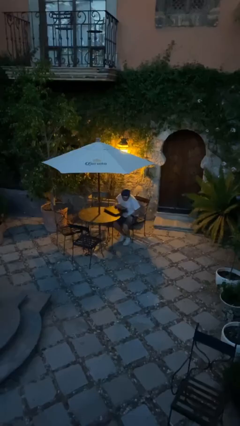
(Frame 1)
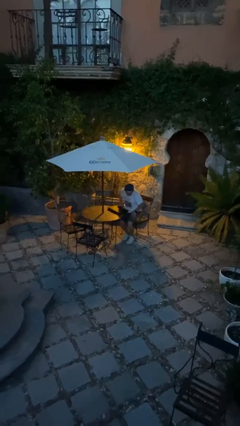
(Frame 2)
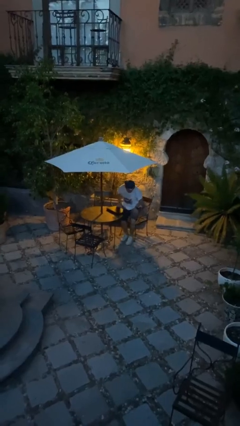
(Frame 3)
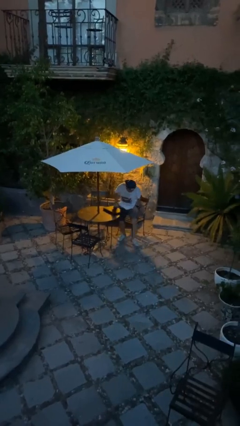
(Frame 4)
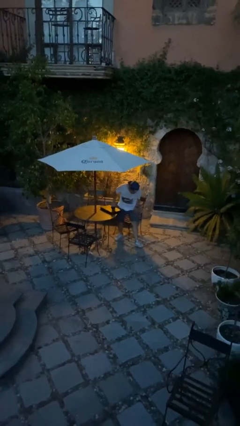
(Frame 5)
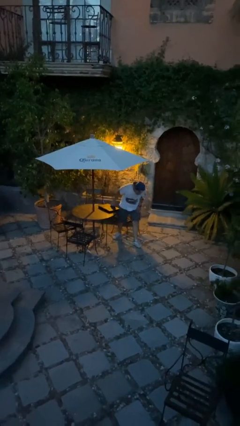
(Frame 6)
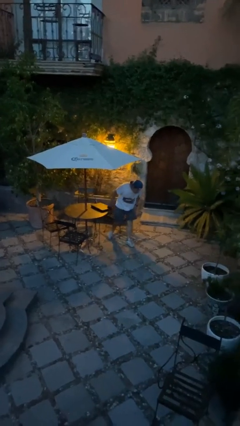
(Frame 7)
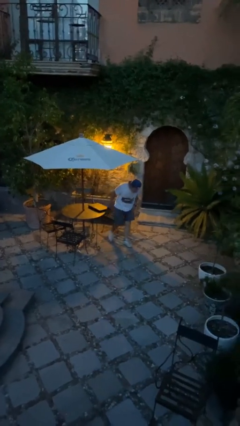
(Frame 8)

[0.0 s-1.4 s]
person stands up

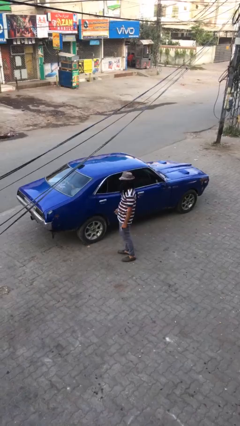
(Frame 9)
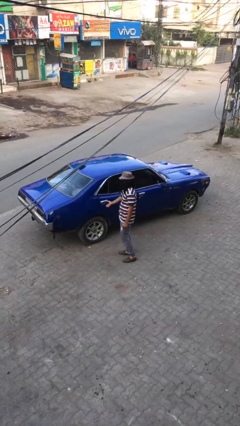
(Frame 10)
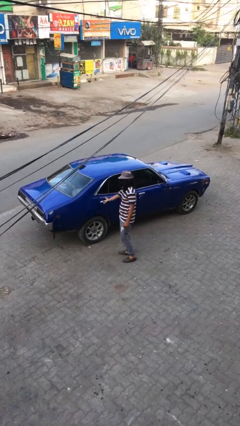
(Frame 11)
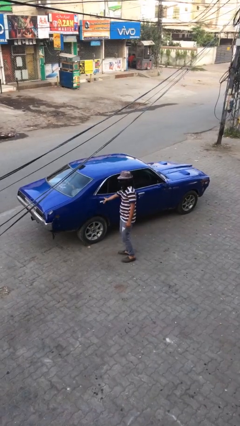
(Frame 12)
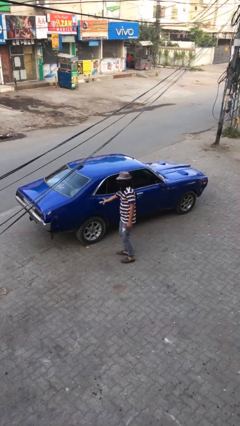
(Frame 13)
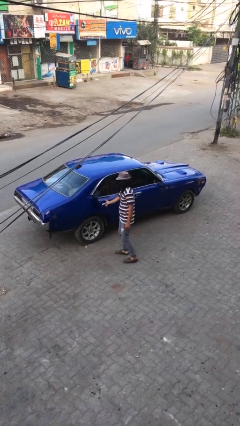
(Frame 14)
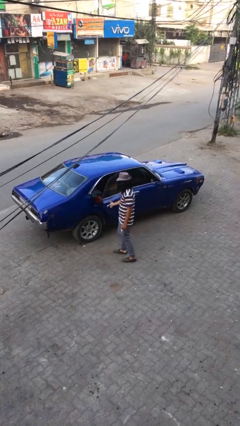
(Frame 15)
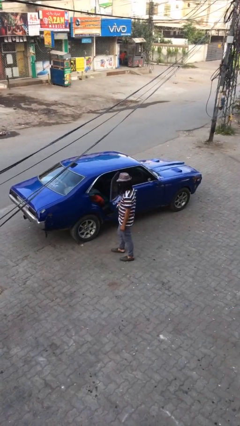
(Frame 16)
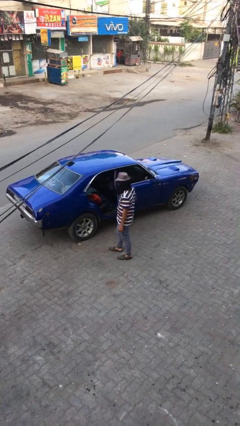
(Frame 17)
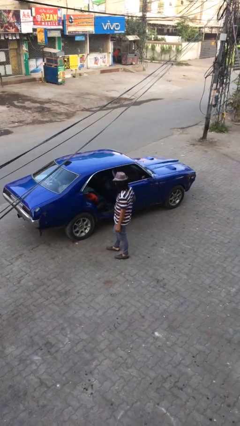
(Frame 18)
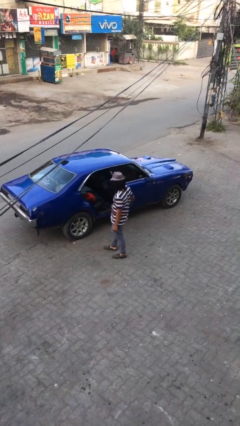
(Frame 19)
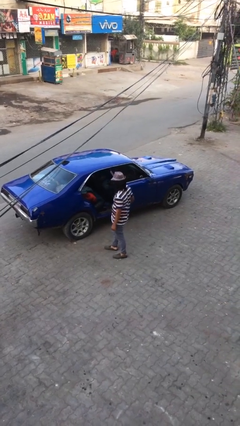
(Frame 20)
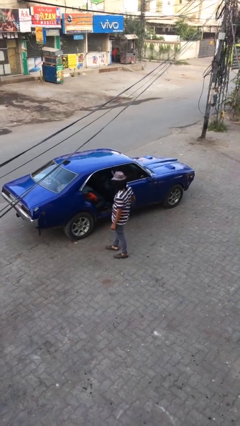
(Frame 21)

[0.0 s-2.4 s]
person opens car door

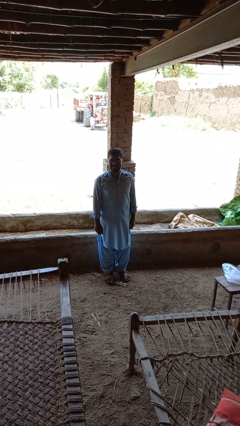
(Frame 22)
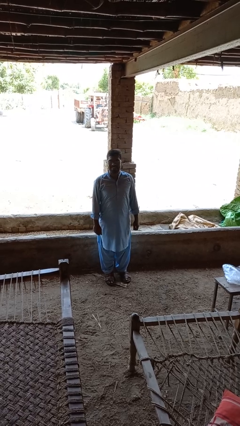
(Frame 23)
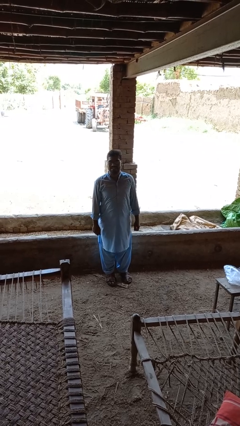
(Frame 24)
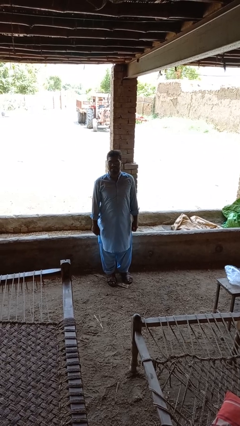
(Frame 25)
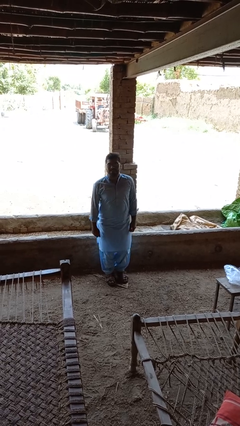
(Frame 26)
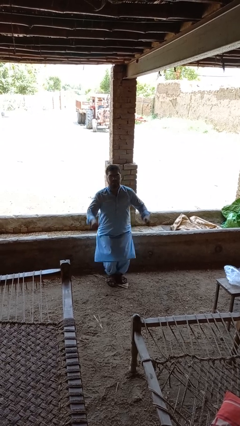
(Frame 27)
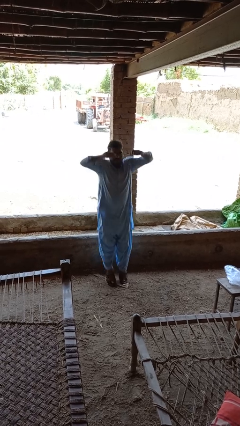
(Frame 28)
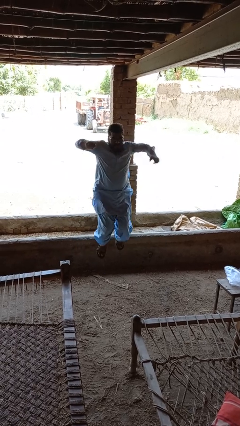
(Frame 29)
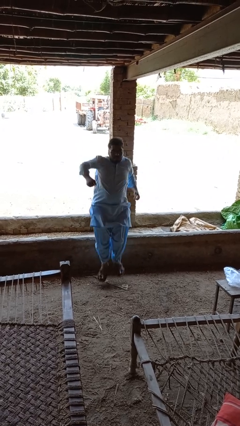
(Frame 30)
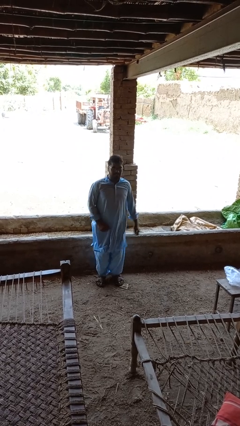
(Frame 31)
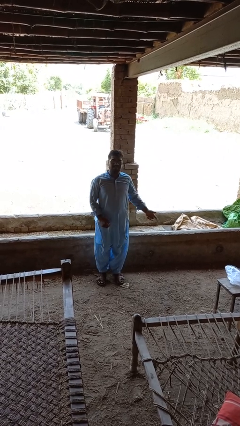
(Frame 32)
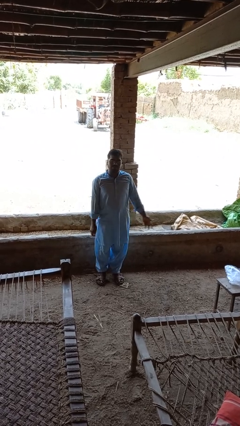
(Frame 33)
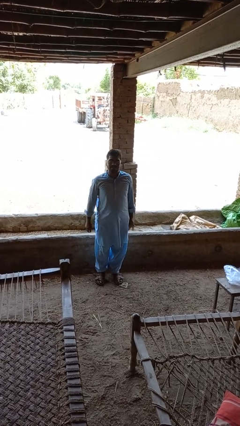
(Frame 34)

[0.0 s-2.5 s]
person jumps

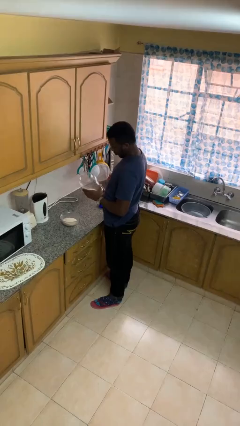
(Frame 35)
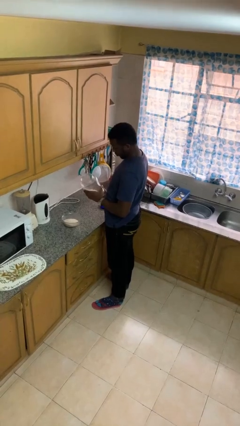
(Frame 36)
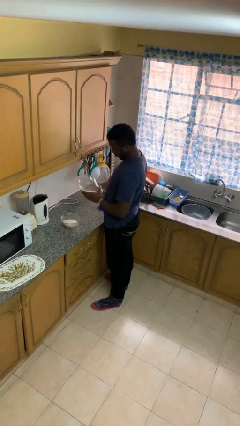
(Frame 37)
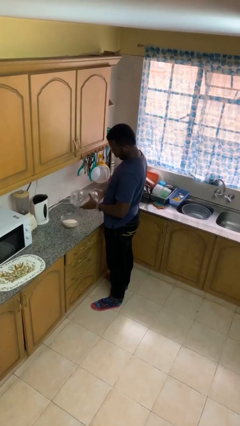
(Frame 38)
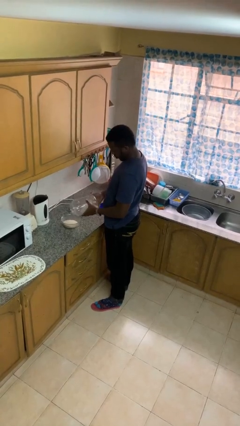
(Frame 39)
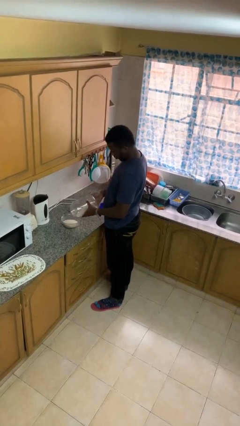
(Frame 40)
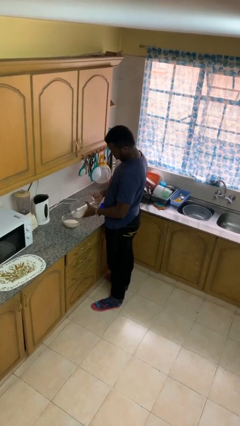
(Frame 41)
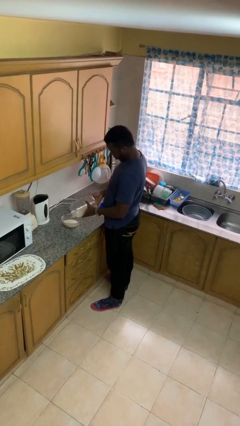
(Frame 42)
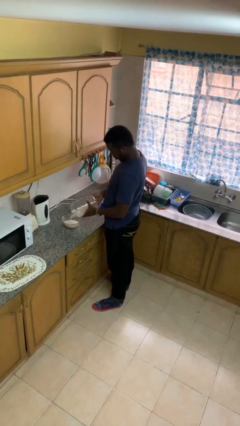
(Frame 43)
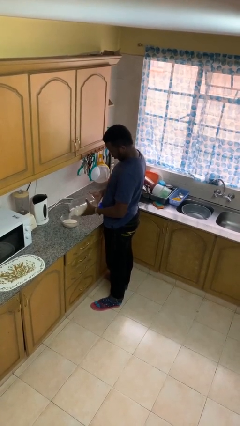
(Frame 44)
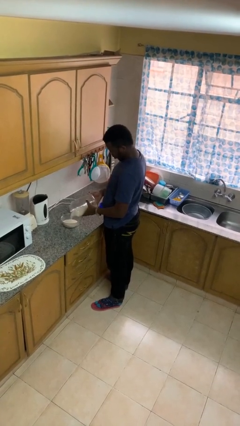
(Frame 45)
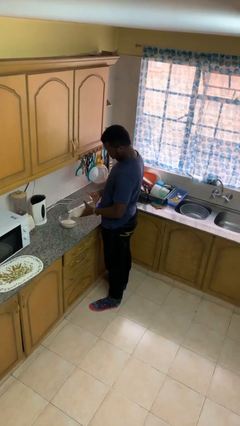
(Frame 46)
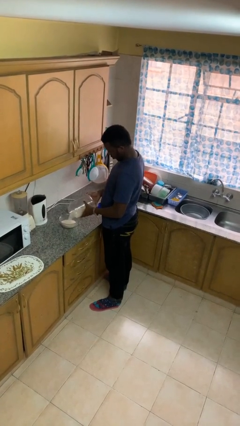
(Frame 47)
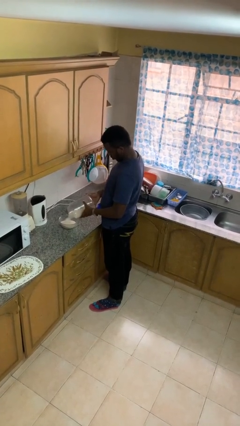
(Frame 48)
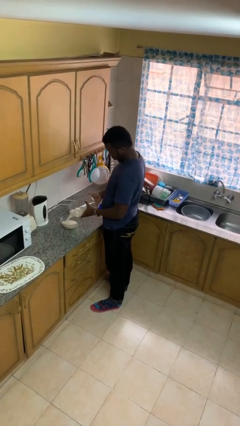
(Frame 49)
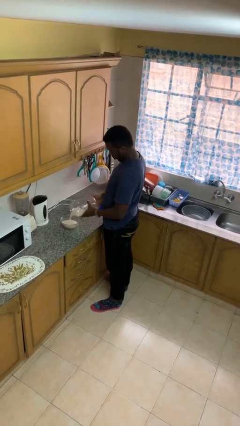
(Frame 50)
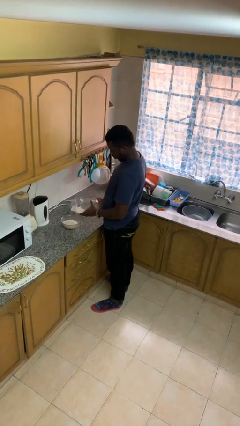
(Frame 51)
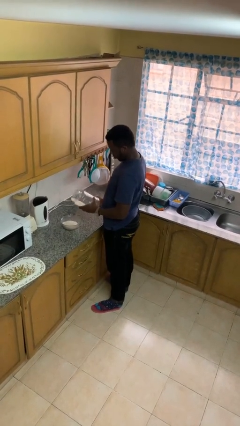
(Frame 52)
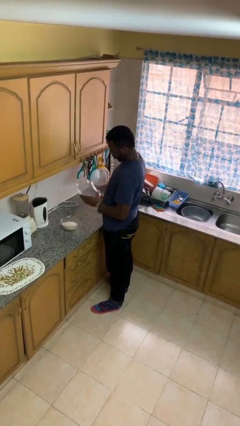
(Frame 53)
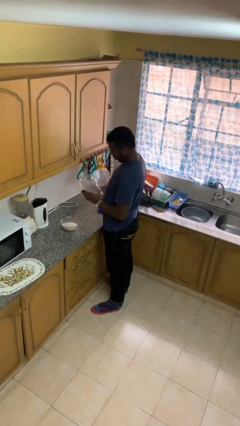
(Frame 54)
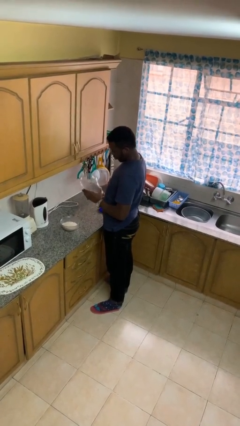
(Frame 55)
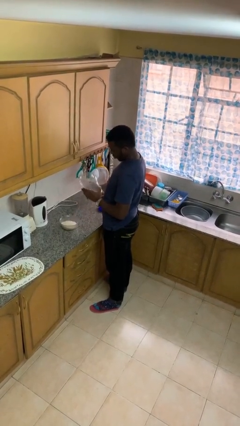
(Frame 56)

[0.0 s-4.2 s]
person pours into bowl

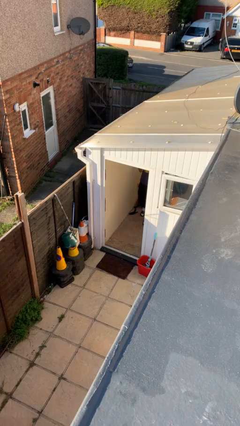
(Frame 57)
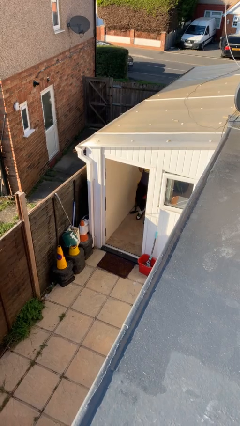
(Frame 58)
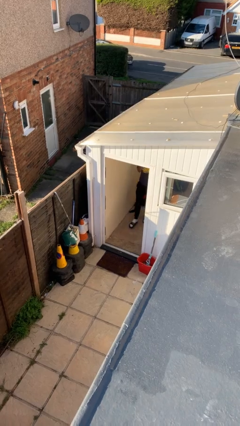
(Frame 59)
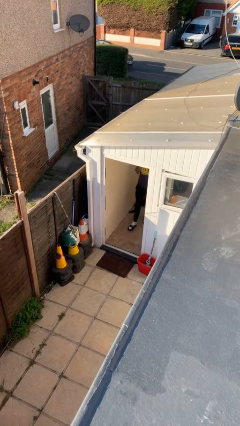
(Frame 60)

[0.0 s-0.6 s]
person enters scene through structure

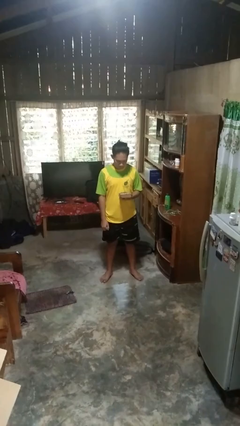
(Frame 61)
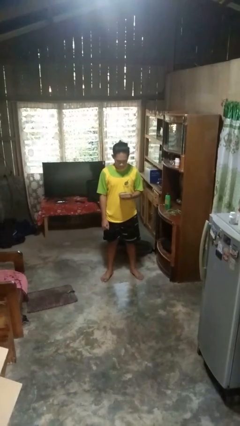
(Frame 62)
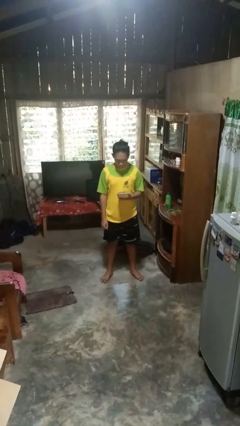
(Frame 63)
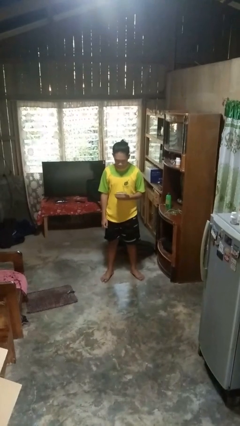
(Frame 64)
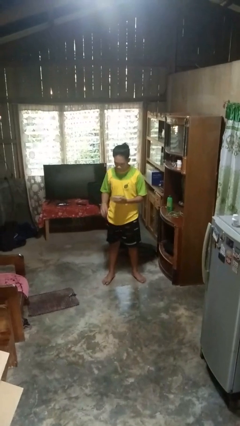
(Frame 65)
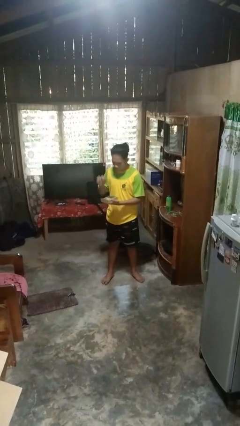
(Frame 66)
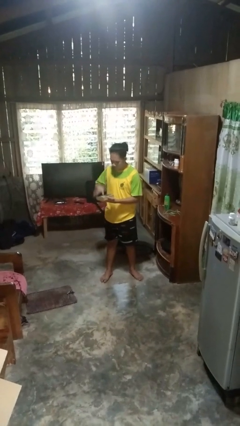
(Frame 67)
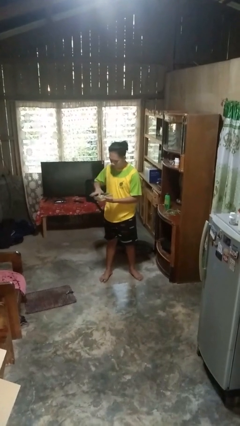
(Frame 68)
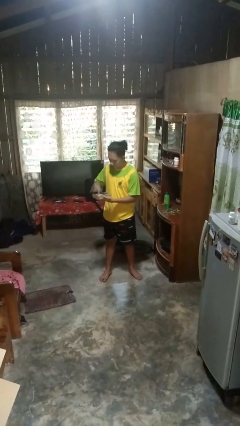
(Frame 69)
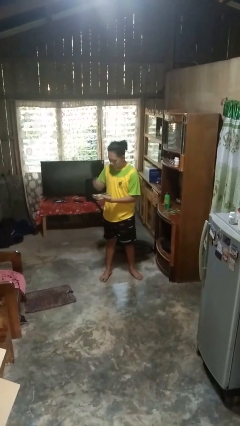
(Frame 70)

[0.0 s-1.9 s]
person taps object with finger

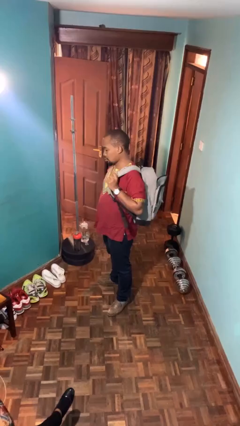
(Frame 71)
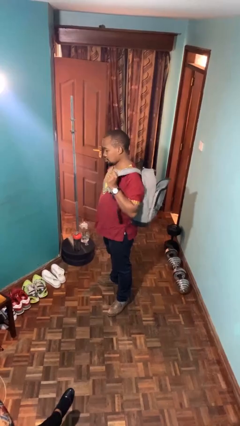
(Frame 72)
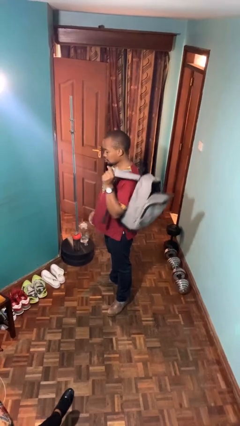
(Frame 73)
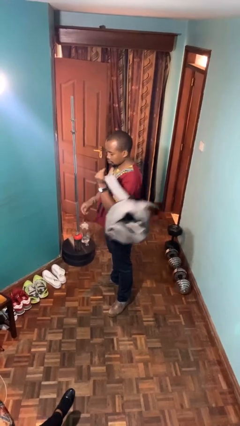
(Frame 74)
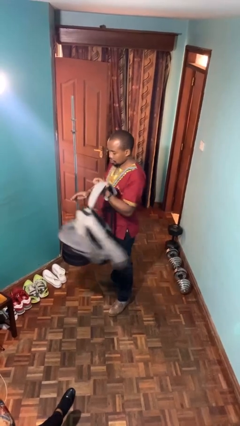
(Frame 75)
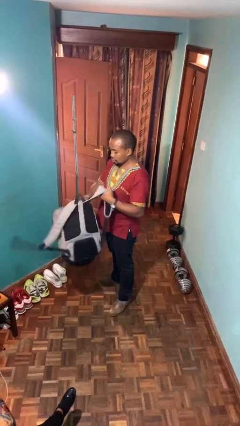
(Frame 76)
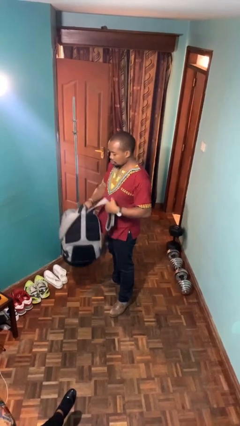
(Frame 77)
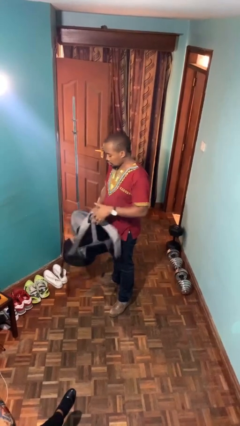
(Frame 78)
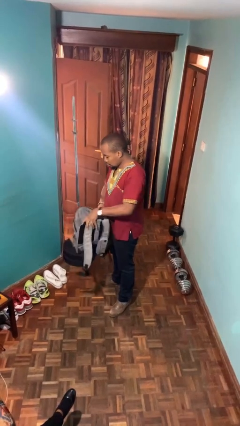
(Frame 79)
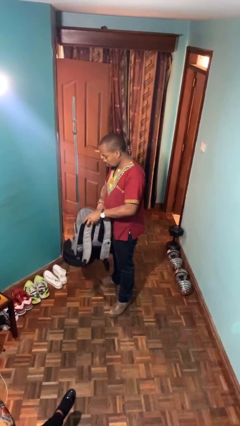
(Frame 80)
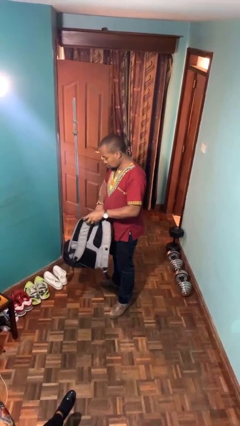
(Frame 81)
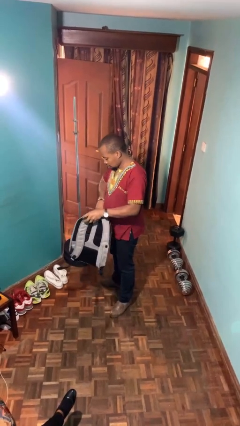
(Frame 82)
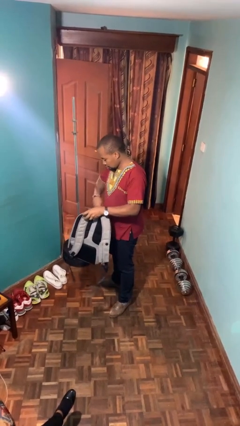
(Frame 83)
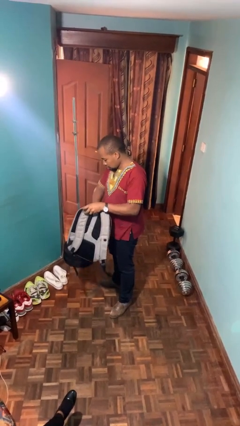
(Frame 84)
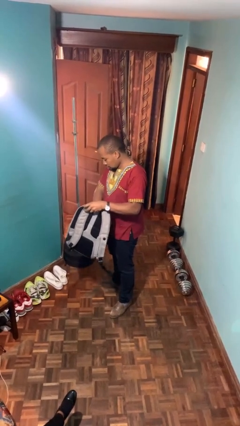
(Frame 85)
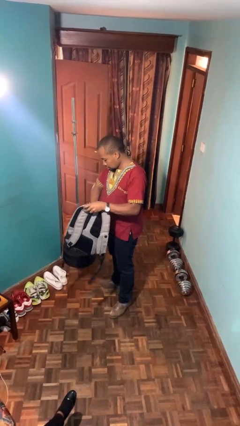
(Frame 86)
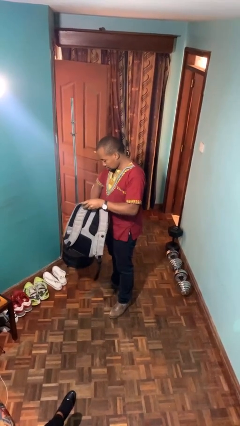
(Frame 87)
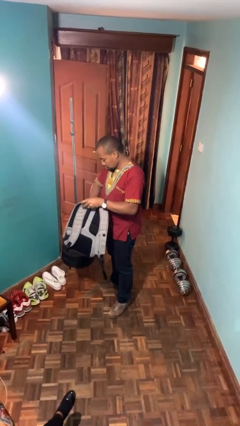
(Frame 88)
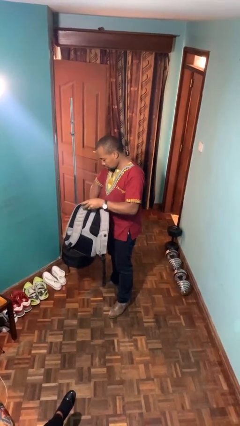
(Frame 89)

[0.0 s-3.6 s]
person searches in backpack

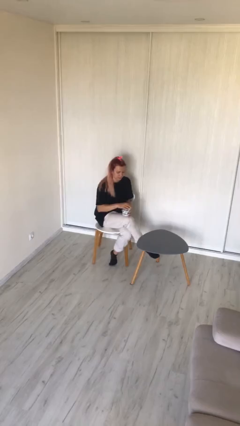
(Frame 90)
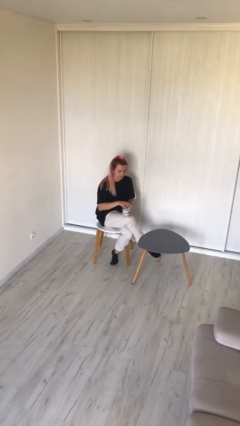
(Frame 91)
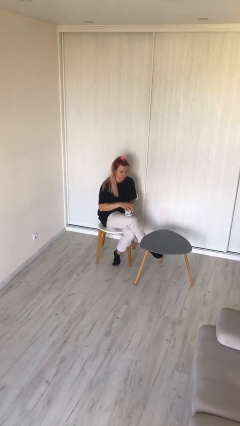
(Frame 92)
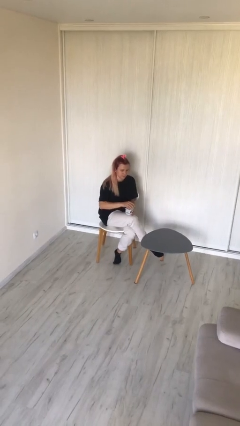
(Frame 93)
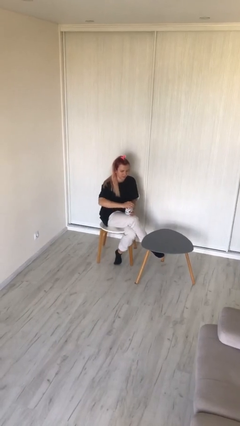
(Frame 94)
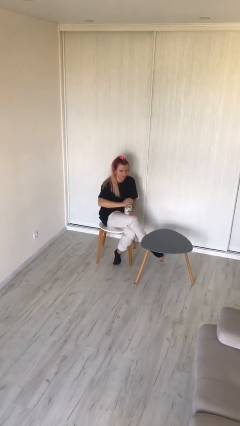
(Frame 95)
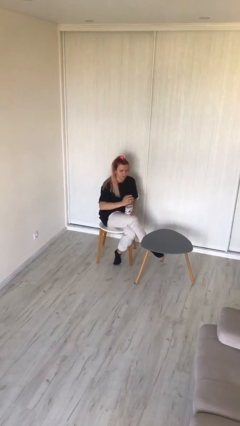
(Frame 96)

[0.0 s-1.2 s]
person opens jar
